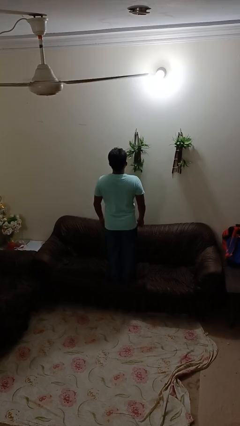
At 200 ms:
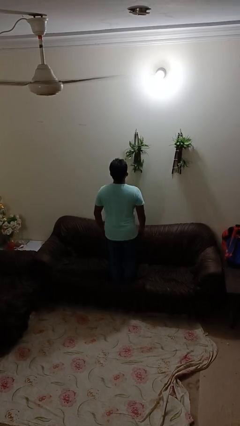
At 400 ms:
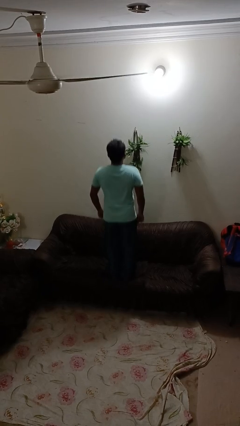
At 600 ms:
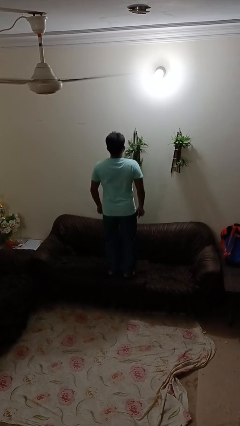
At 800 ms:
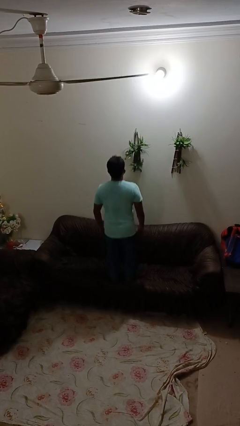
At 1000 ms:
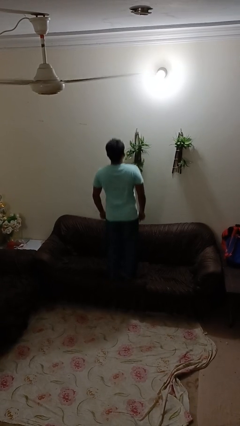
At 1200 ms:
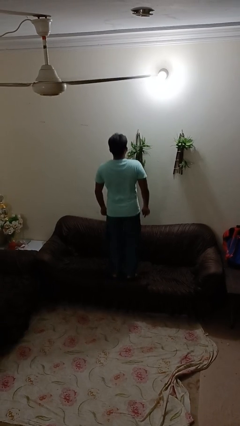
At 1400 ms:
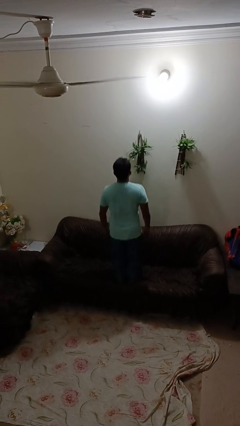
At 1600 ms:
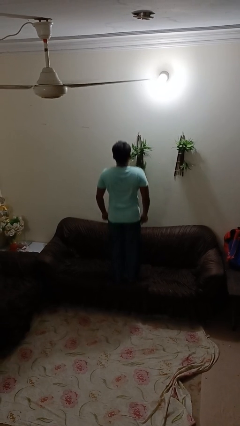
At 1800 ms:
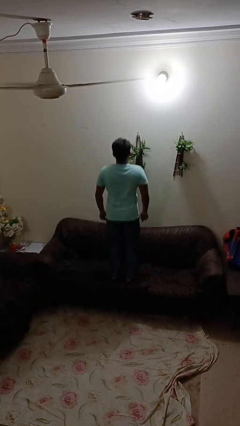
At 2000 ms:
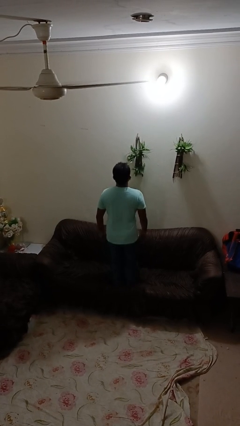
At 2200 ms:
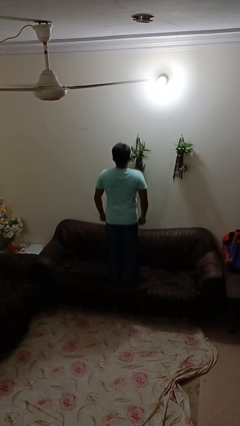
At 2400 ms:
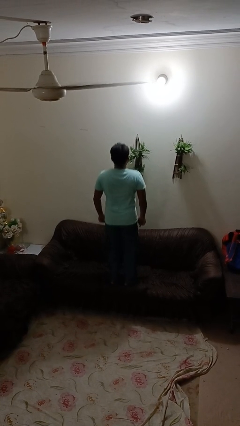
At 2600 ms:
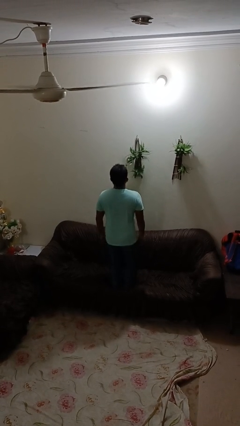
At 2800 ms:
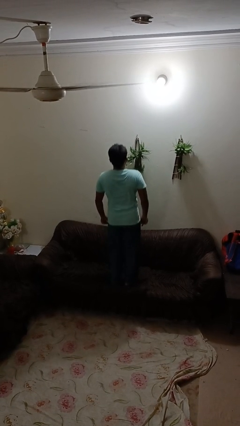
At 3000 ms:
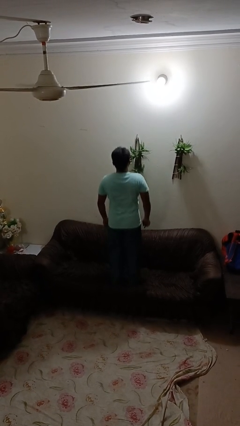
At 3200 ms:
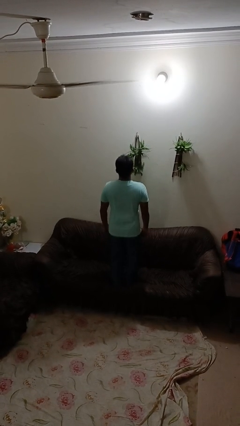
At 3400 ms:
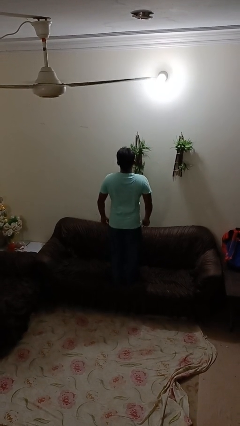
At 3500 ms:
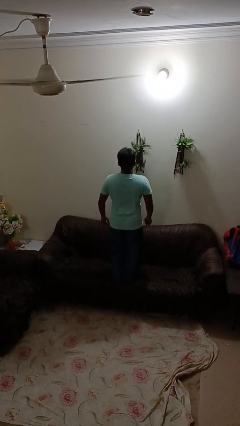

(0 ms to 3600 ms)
person jumps on couch

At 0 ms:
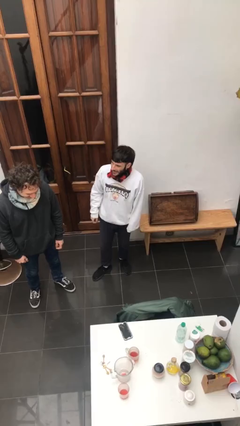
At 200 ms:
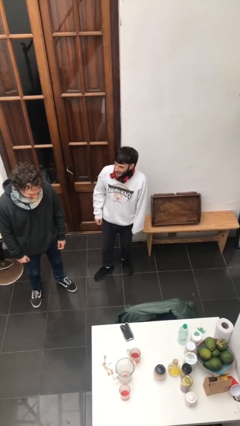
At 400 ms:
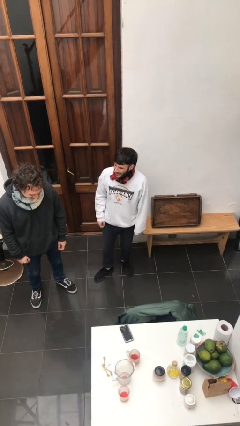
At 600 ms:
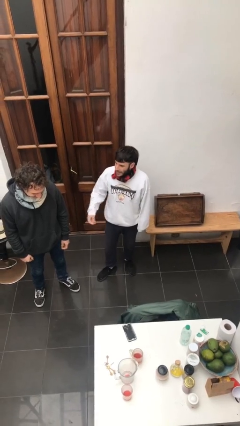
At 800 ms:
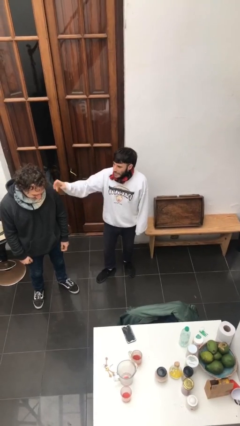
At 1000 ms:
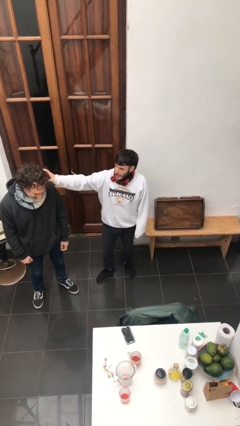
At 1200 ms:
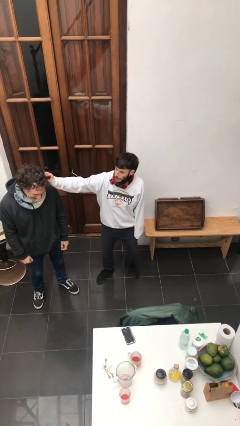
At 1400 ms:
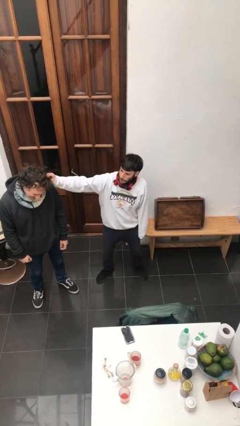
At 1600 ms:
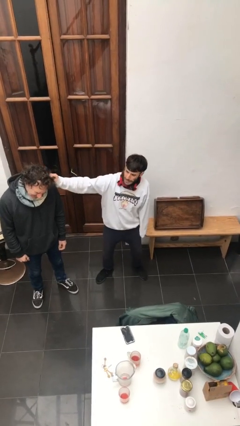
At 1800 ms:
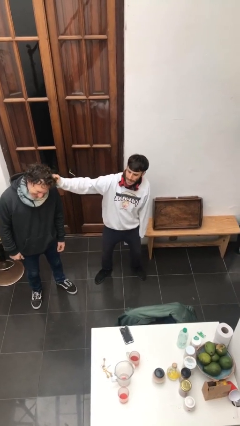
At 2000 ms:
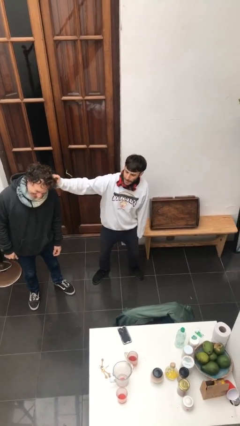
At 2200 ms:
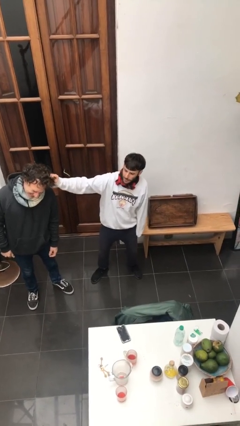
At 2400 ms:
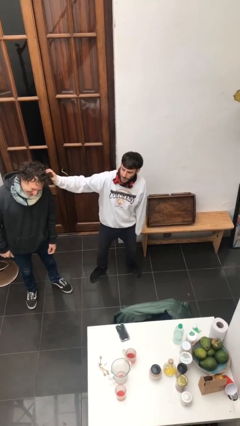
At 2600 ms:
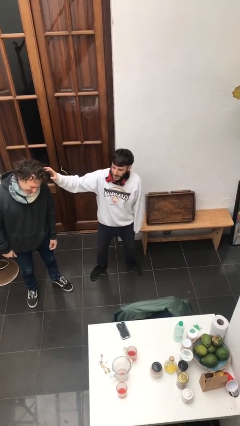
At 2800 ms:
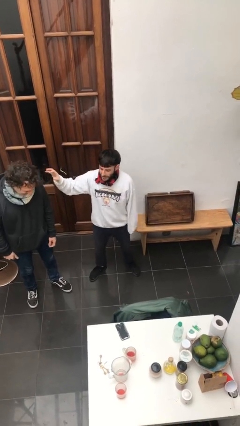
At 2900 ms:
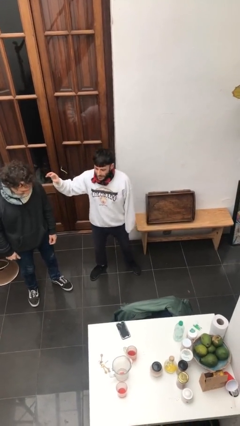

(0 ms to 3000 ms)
person grabs person by hair

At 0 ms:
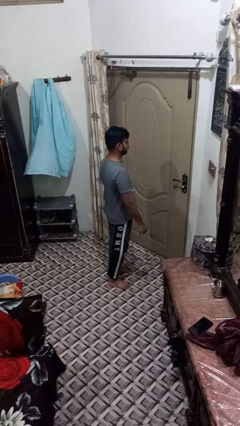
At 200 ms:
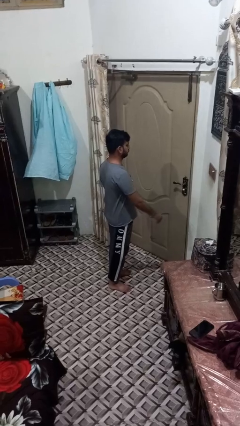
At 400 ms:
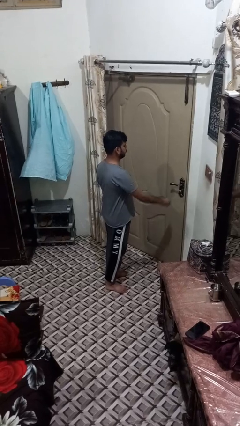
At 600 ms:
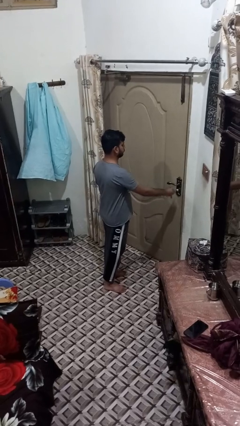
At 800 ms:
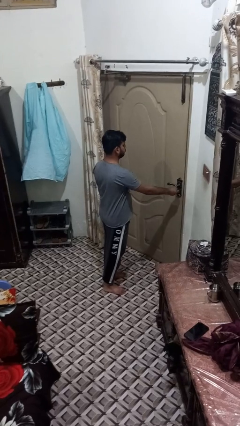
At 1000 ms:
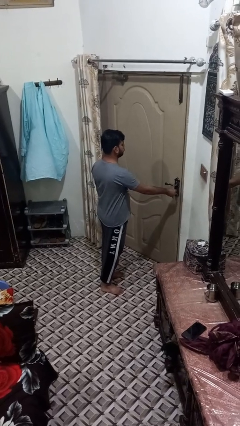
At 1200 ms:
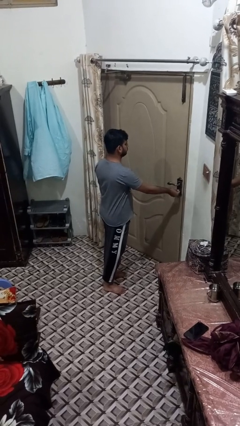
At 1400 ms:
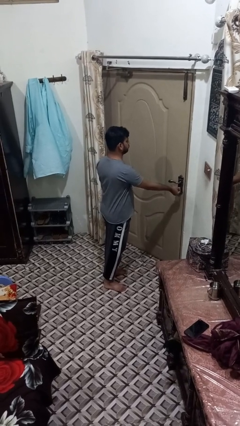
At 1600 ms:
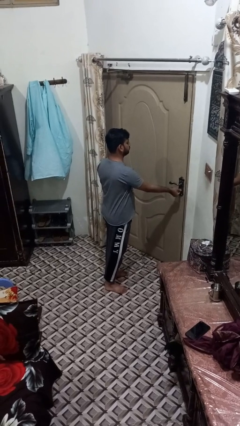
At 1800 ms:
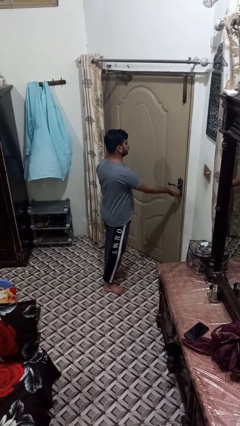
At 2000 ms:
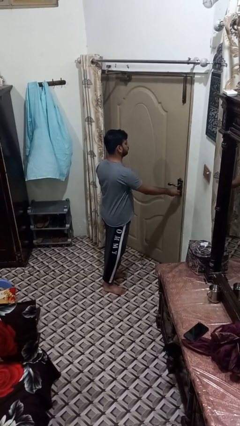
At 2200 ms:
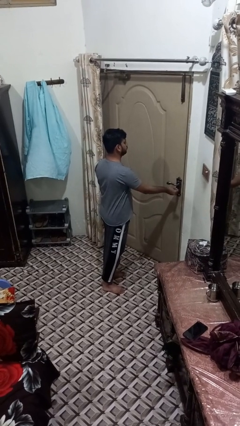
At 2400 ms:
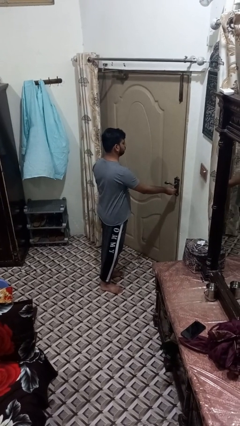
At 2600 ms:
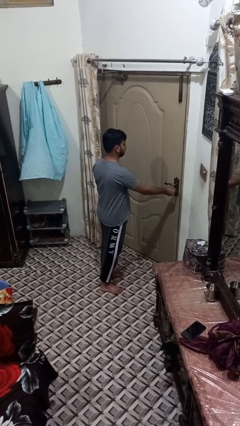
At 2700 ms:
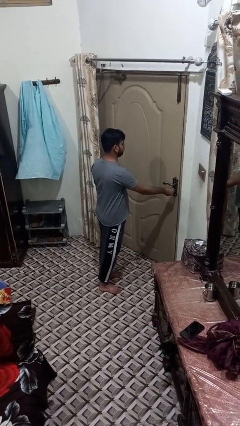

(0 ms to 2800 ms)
person unlocks door with keys

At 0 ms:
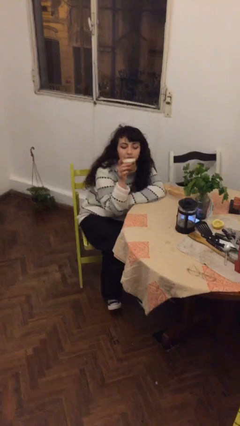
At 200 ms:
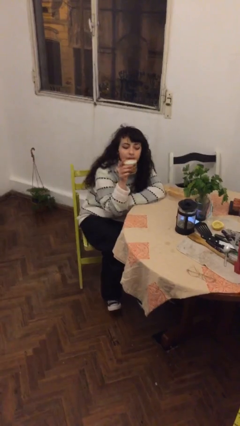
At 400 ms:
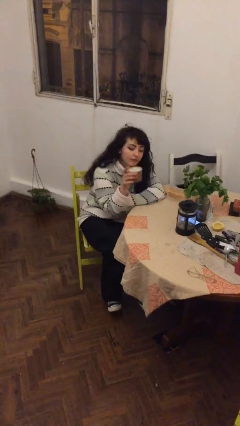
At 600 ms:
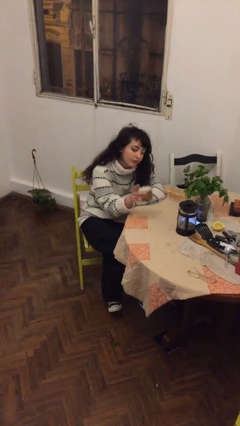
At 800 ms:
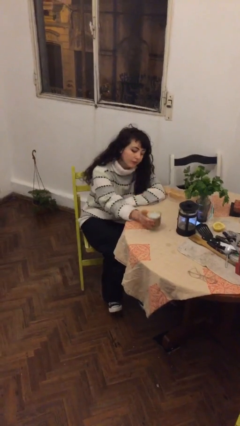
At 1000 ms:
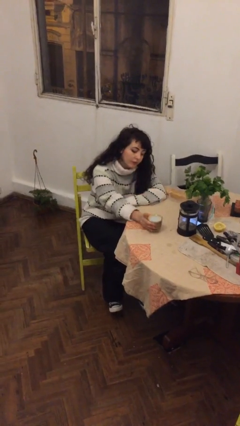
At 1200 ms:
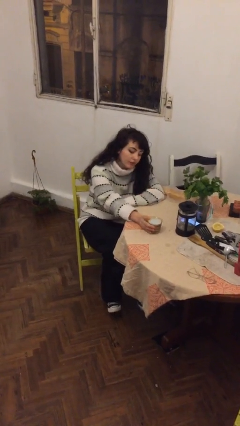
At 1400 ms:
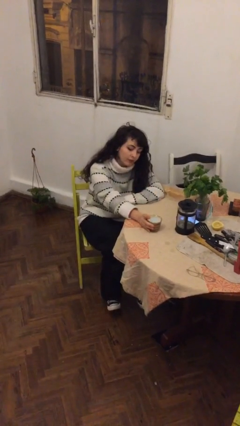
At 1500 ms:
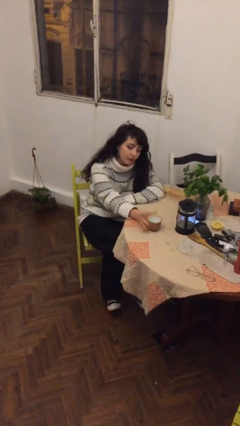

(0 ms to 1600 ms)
person puts down object on table

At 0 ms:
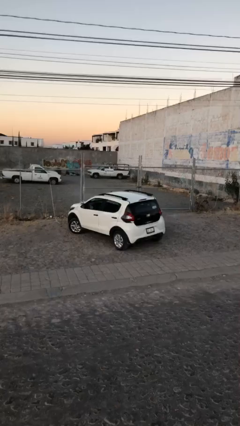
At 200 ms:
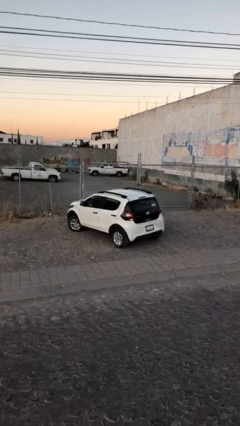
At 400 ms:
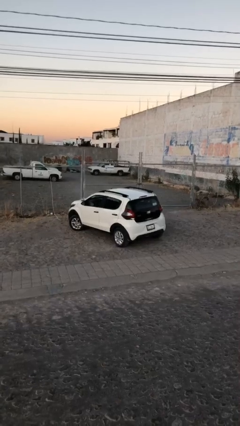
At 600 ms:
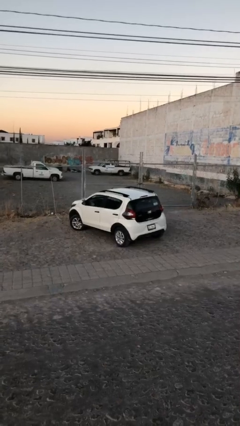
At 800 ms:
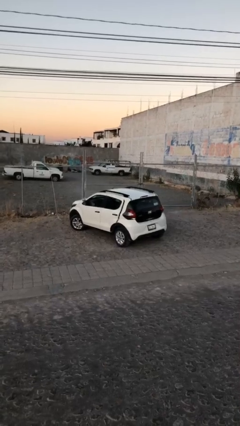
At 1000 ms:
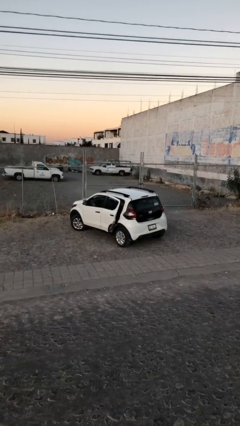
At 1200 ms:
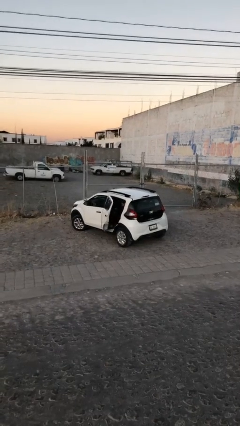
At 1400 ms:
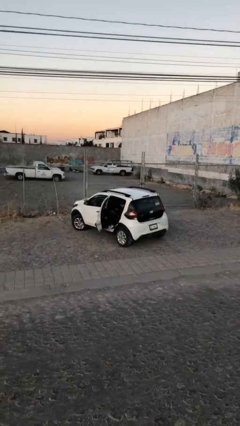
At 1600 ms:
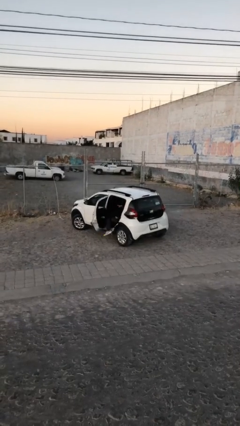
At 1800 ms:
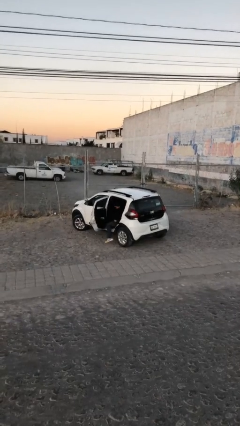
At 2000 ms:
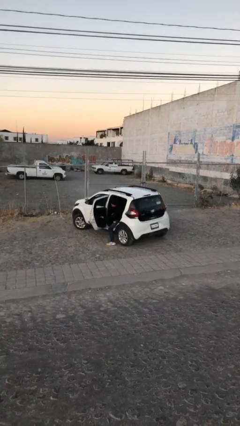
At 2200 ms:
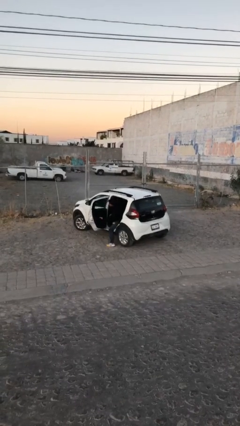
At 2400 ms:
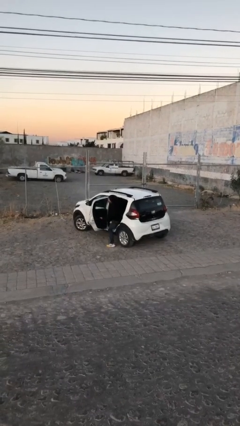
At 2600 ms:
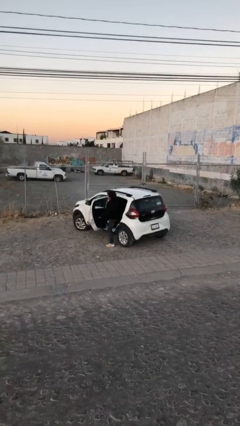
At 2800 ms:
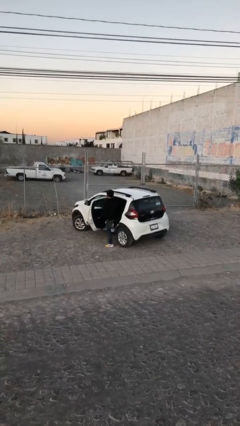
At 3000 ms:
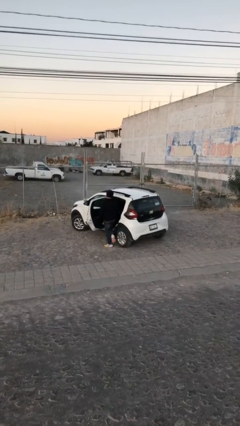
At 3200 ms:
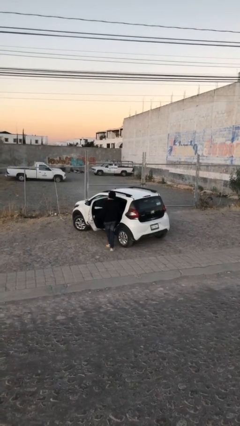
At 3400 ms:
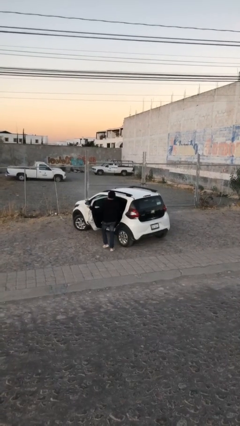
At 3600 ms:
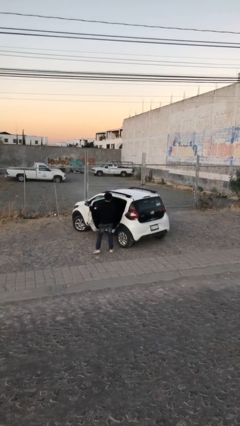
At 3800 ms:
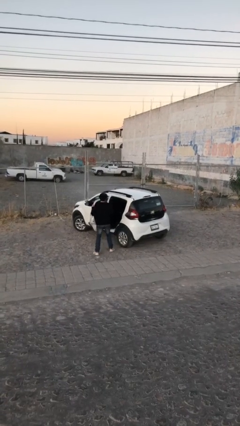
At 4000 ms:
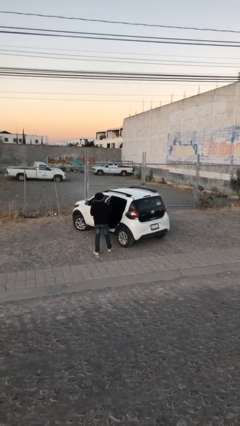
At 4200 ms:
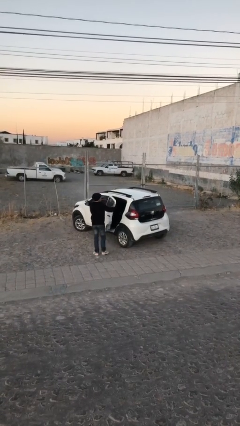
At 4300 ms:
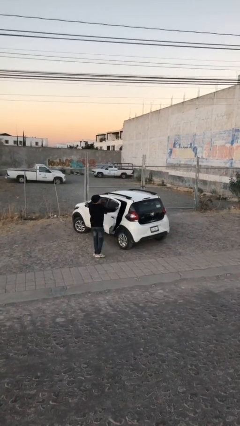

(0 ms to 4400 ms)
car drops off person

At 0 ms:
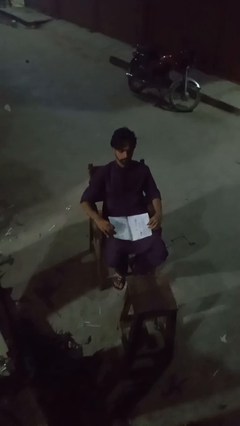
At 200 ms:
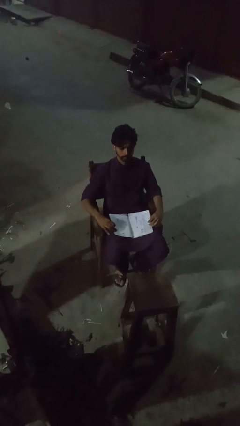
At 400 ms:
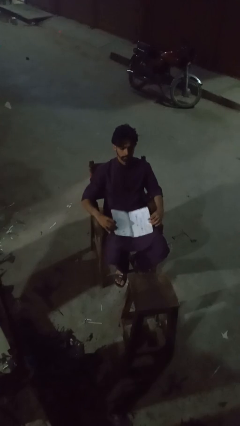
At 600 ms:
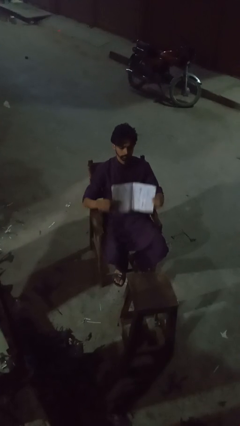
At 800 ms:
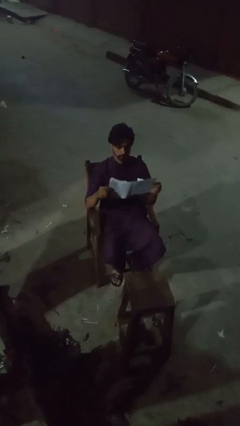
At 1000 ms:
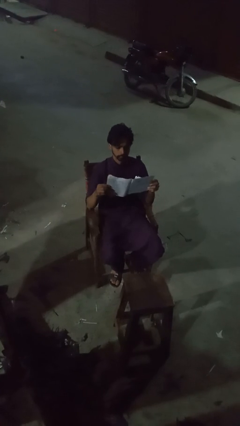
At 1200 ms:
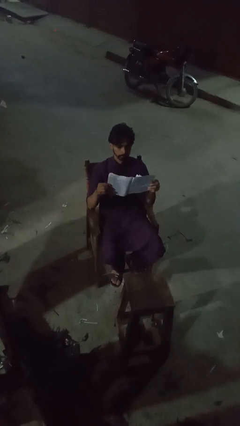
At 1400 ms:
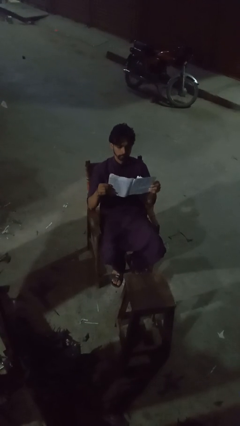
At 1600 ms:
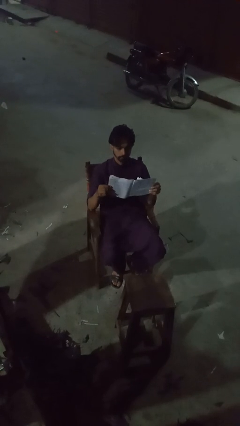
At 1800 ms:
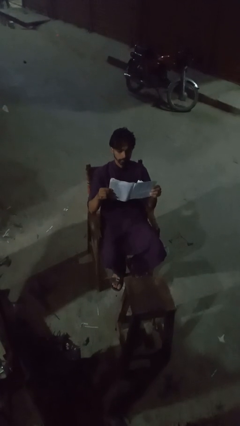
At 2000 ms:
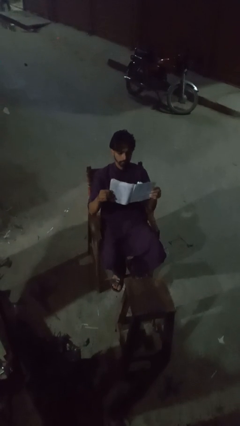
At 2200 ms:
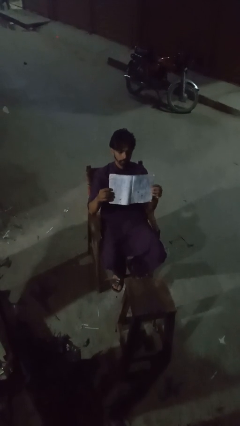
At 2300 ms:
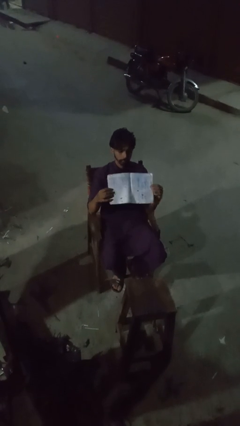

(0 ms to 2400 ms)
person reads magazine
